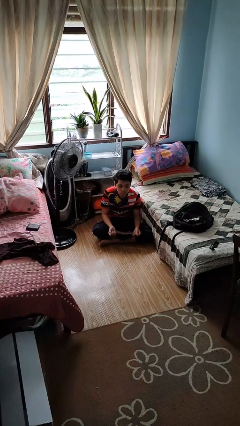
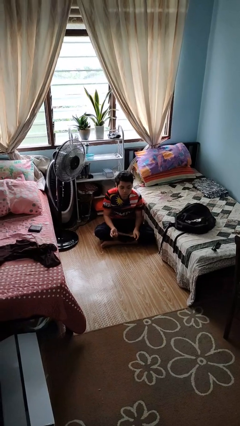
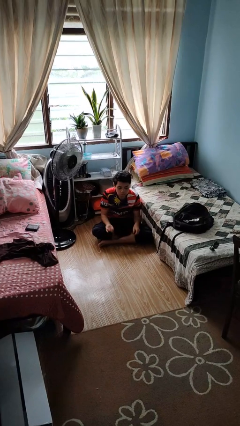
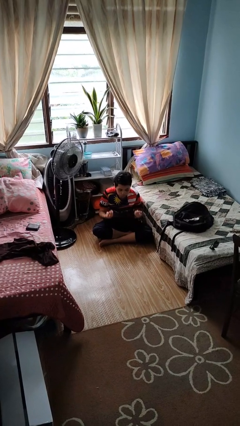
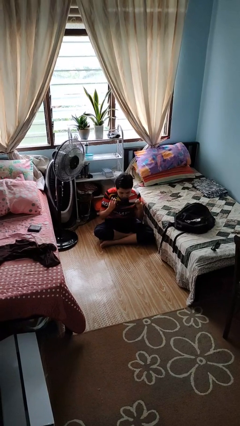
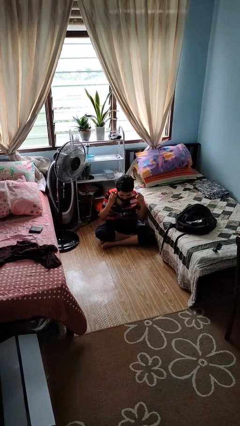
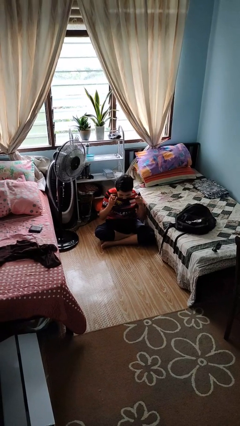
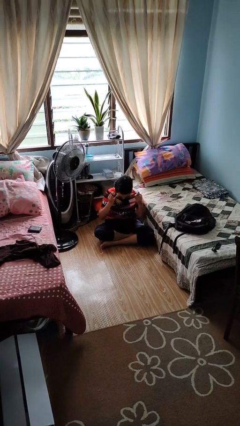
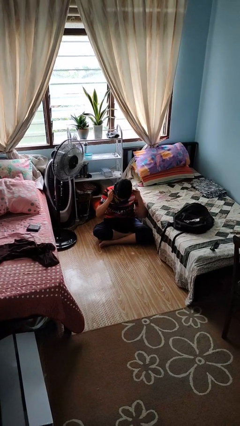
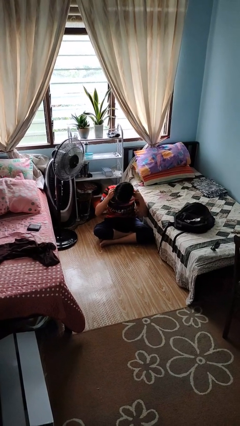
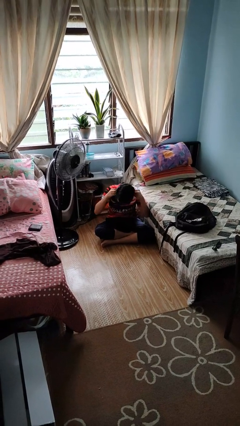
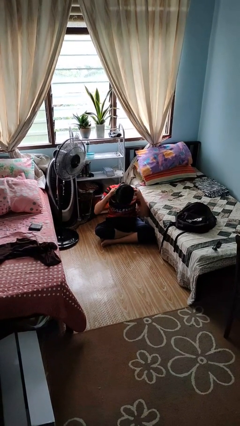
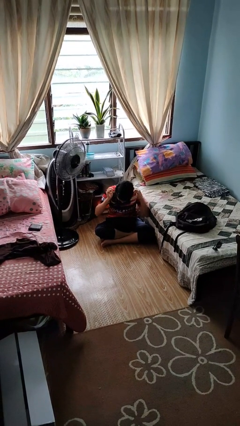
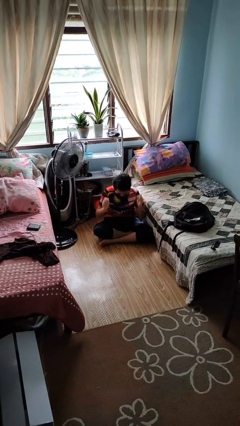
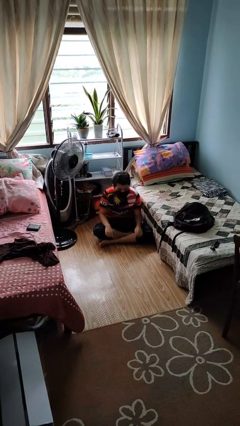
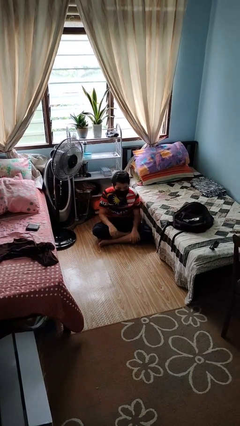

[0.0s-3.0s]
person puts on facemask

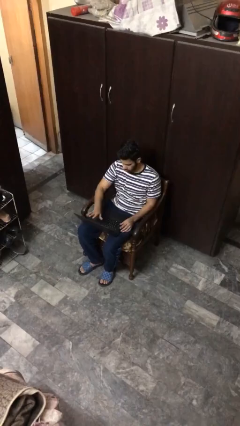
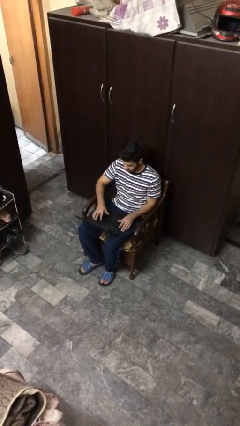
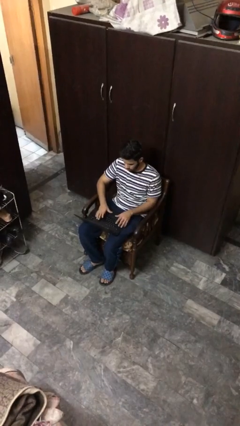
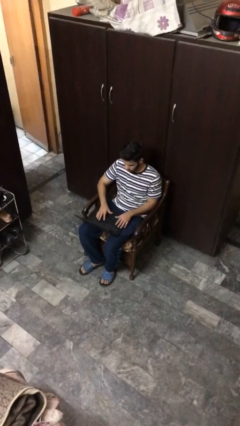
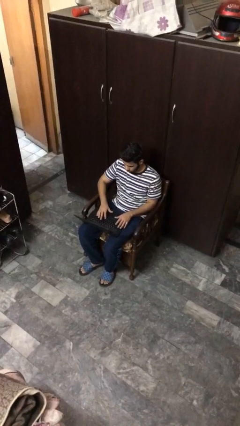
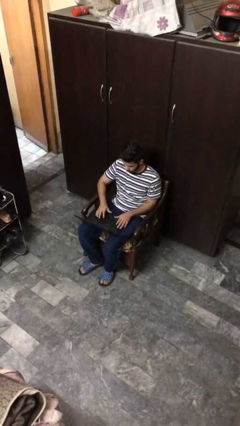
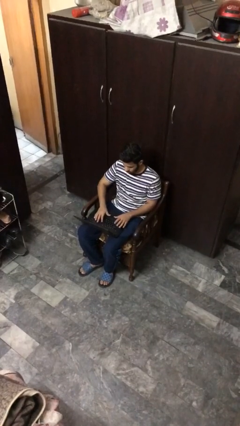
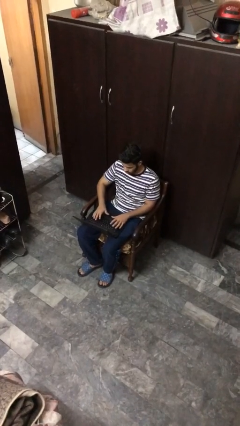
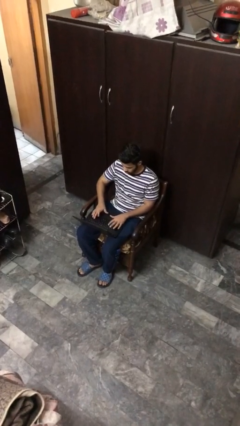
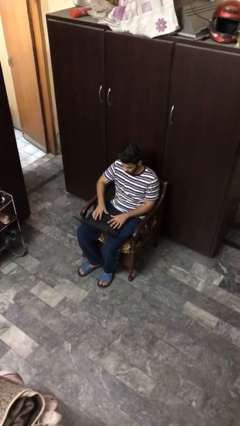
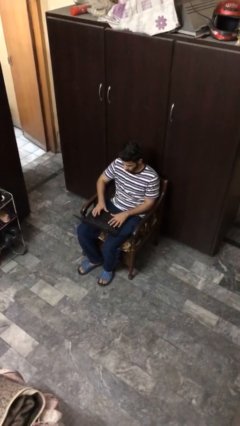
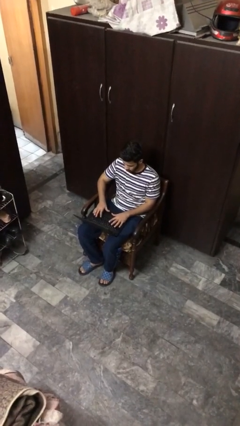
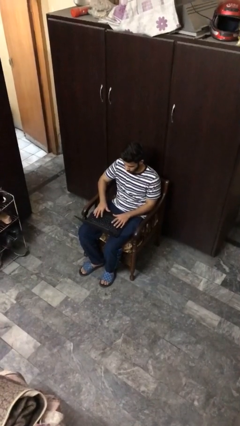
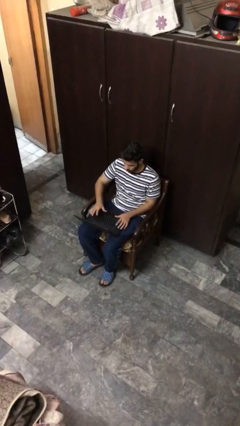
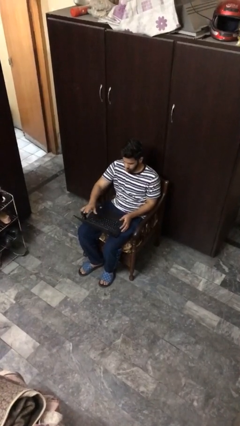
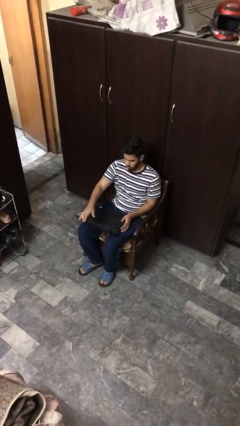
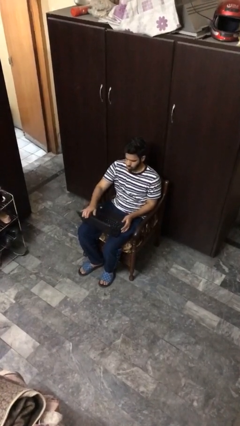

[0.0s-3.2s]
person interacts with laptop

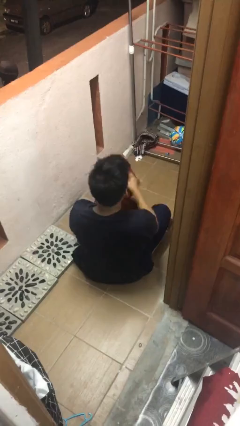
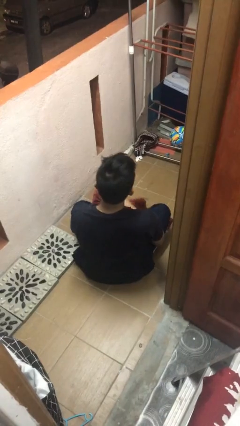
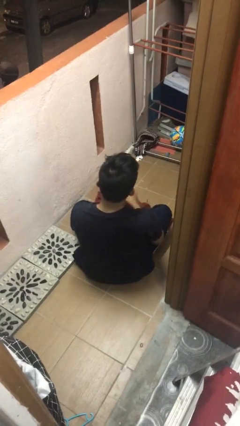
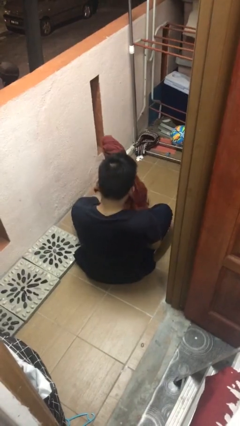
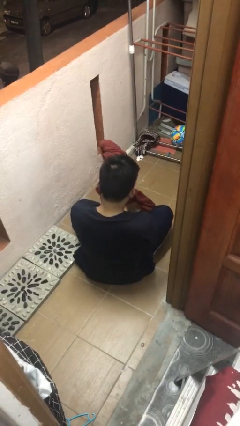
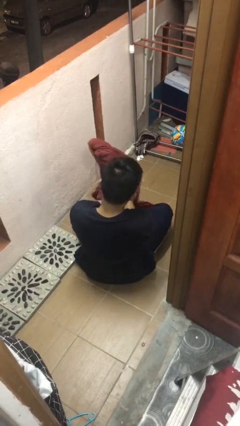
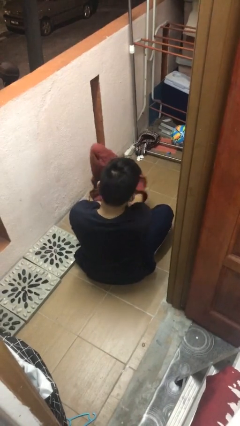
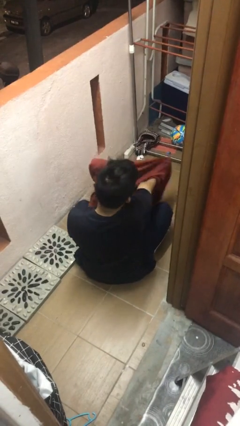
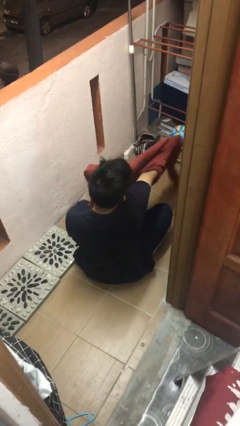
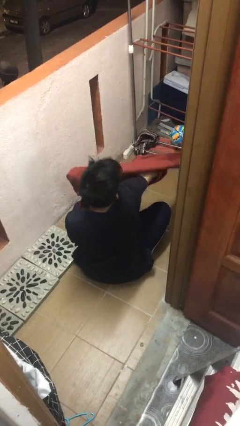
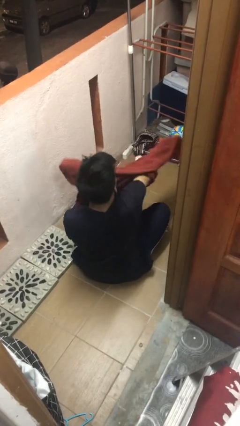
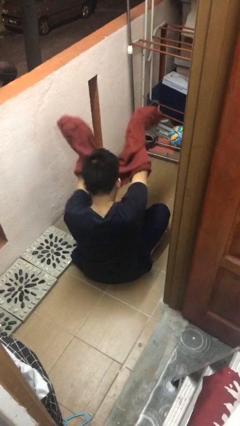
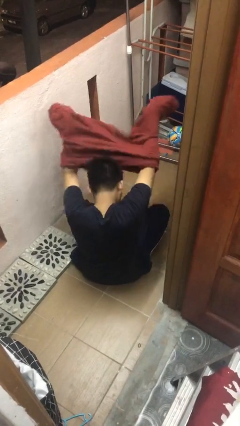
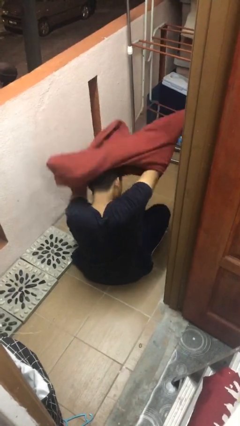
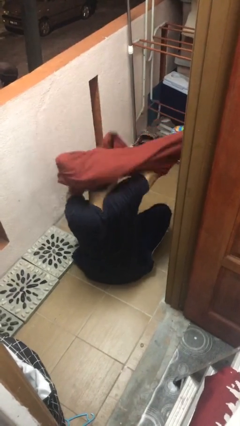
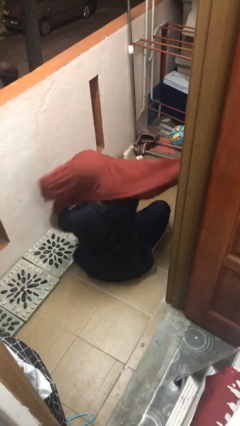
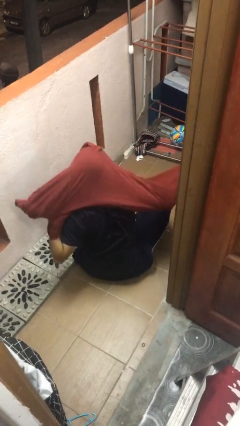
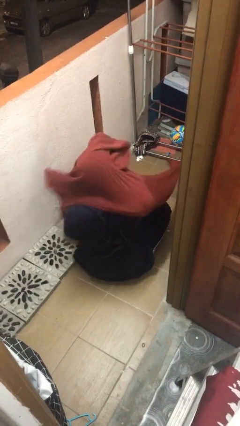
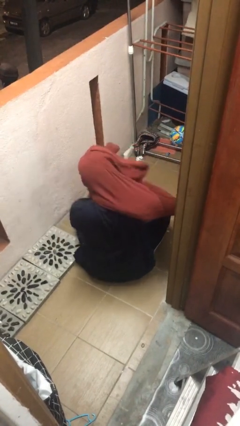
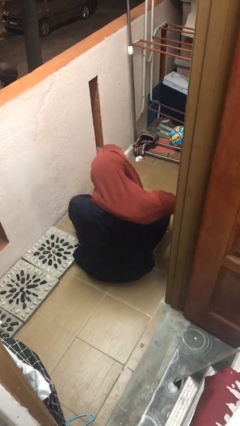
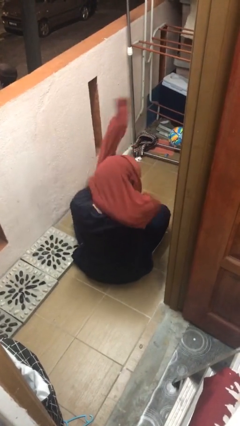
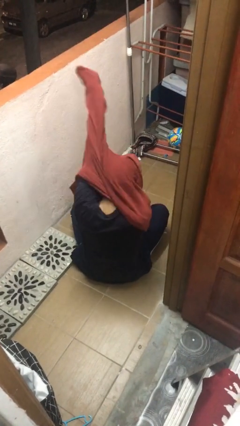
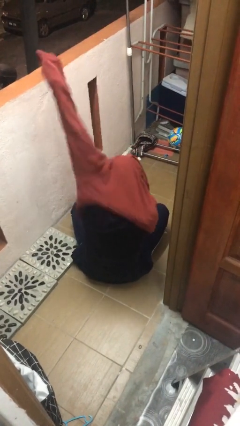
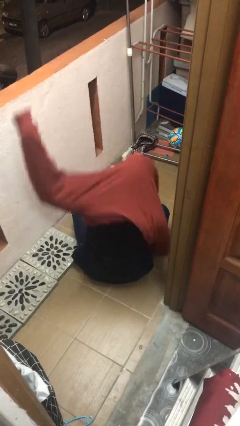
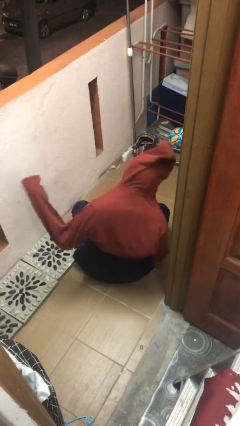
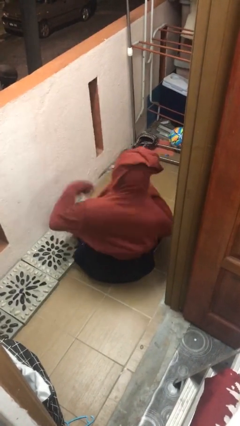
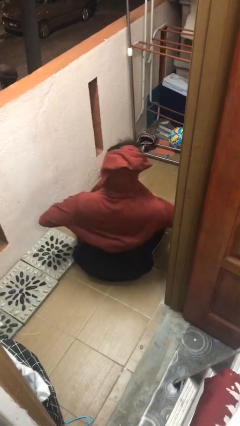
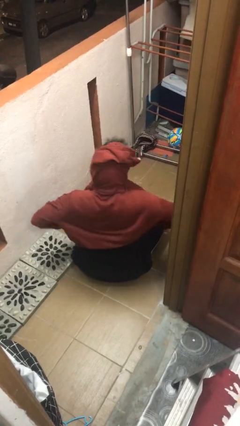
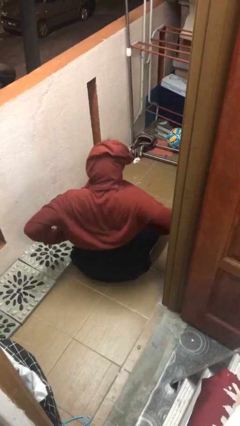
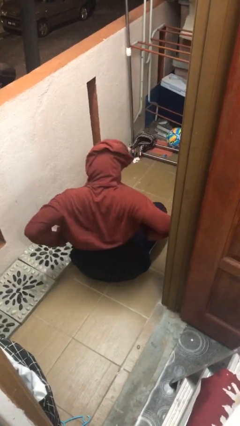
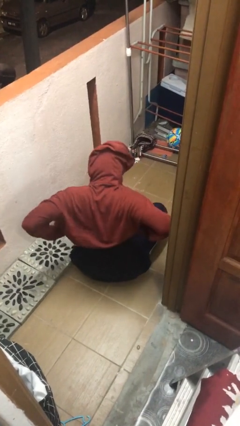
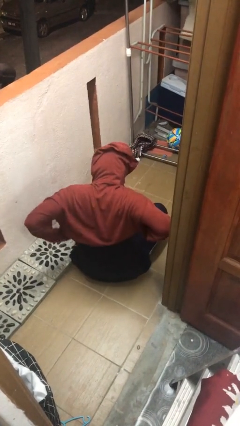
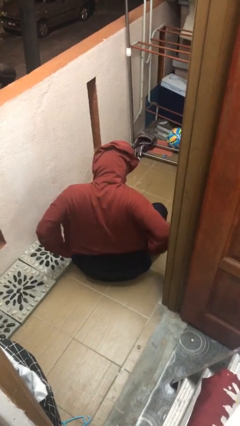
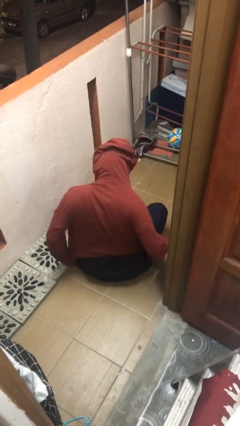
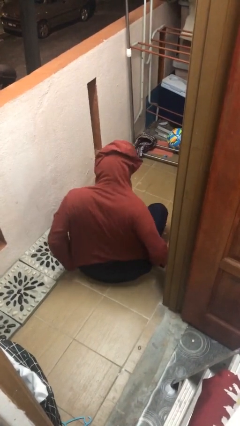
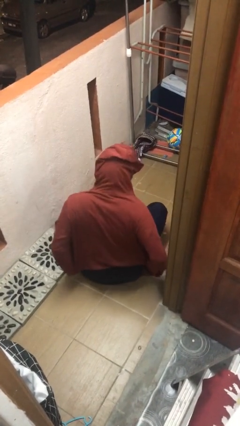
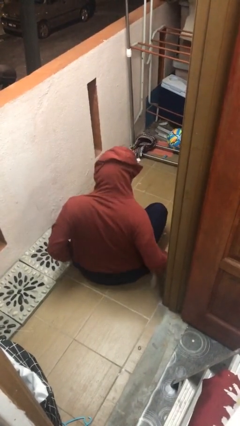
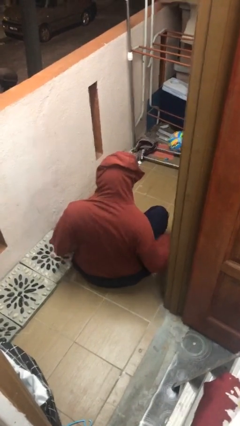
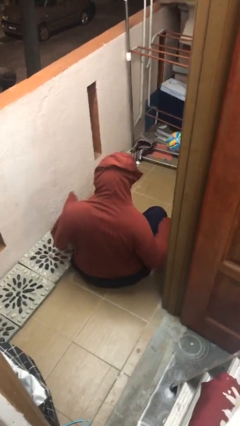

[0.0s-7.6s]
person puts on hoodie

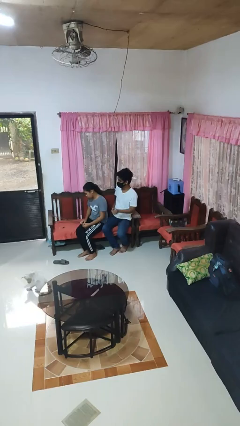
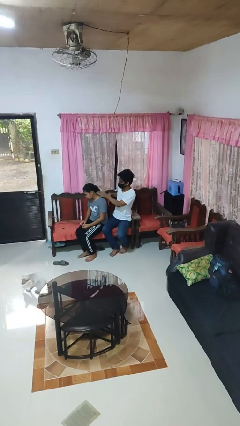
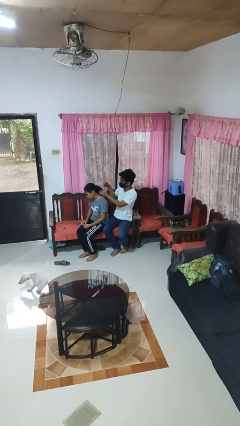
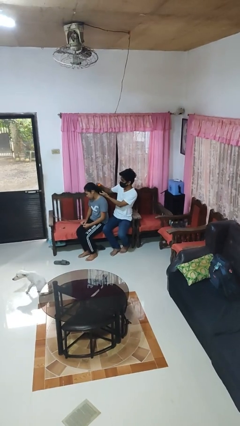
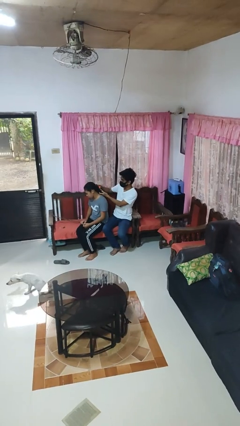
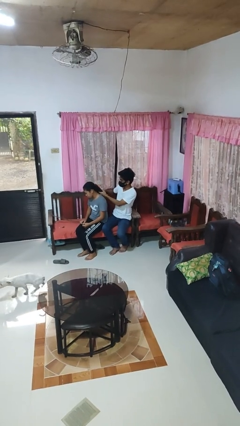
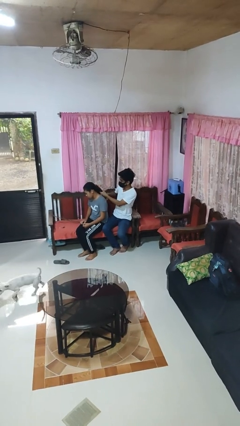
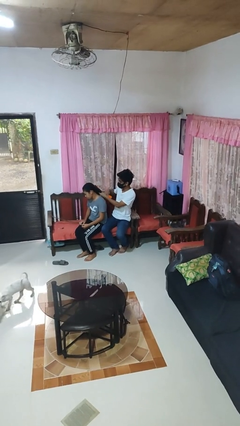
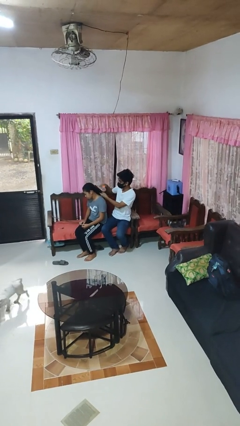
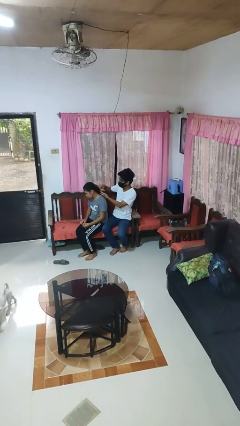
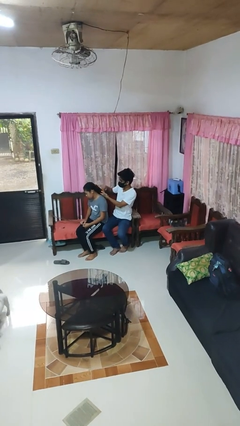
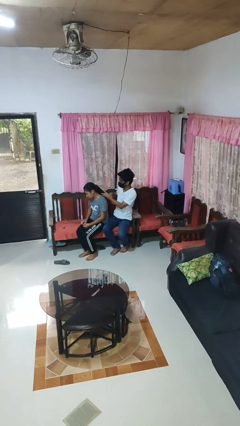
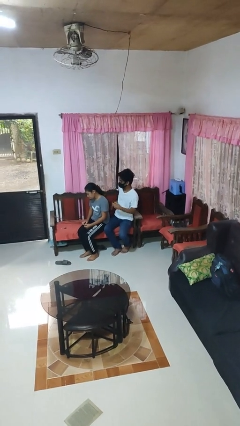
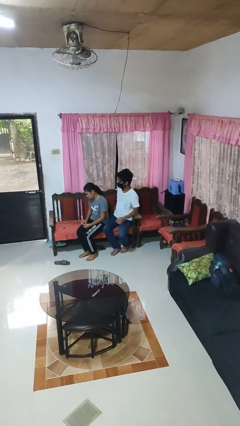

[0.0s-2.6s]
person brushes hair of person

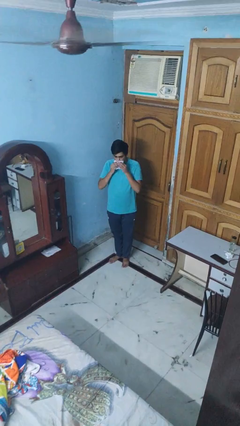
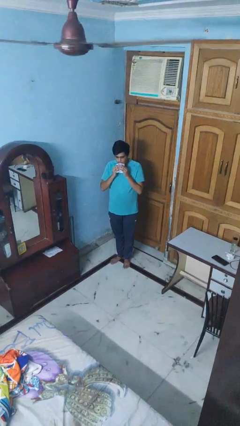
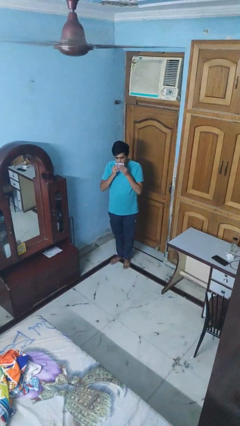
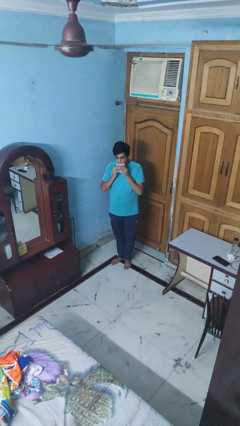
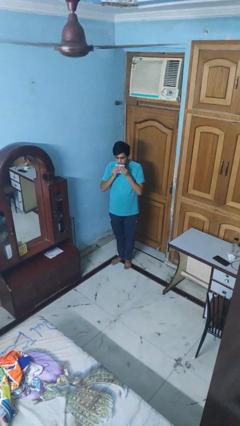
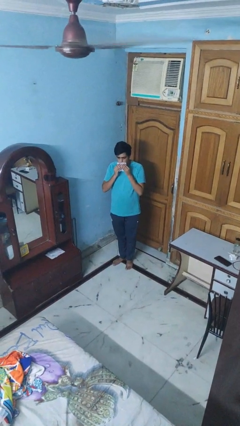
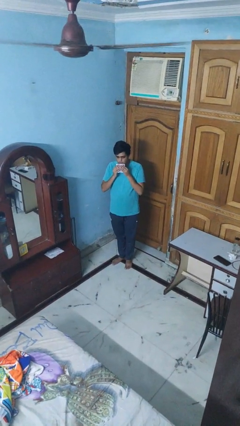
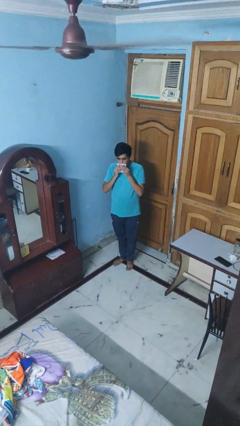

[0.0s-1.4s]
person wipes mouth with napkin
